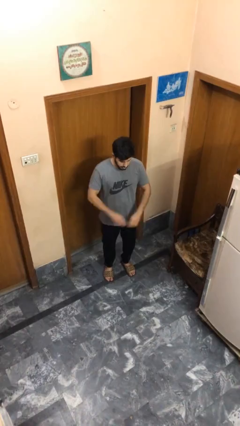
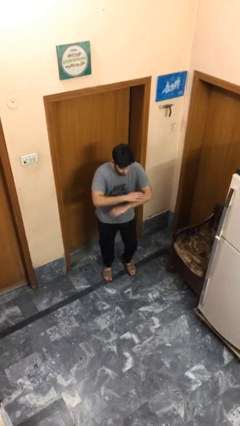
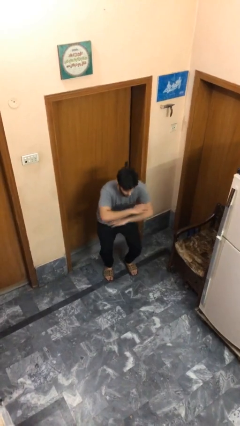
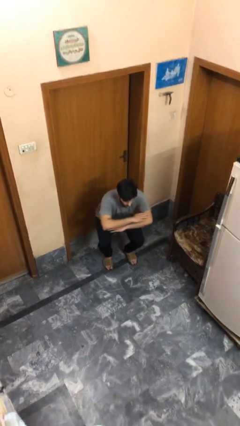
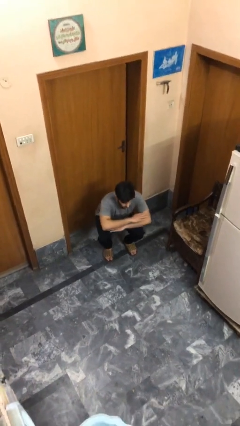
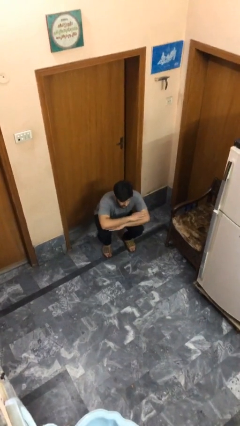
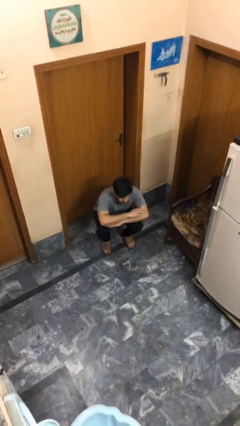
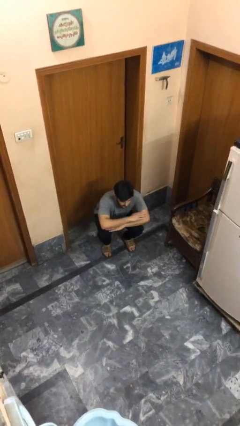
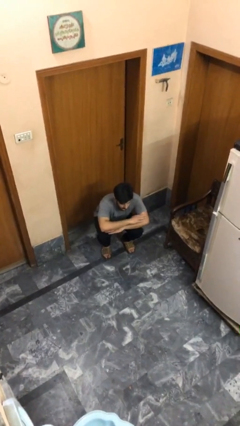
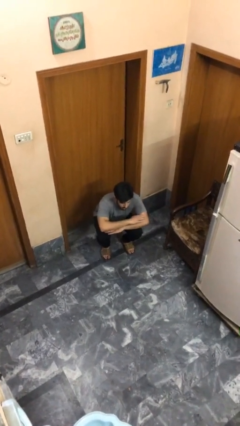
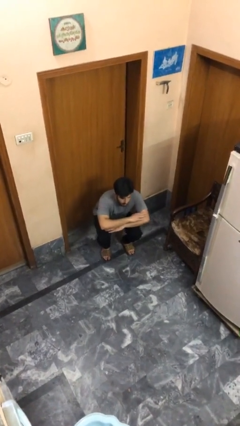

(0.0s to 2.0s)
person squats

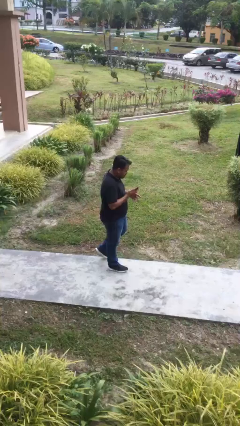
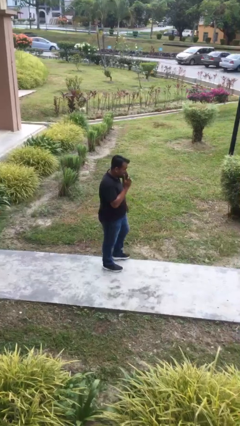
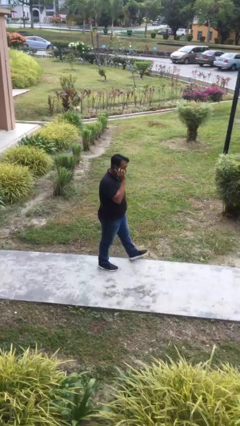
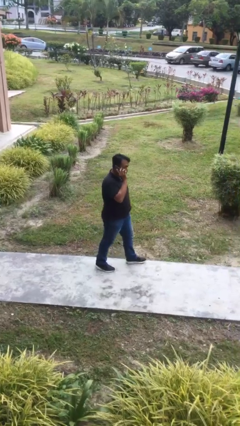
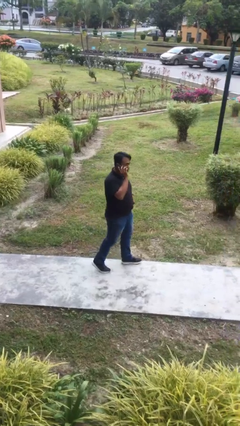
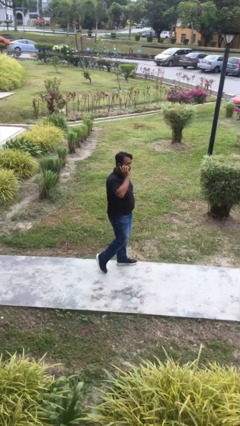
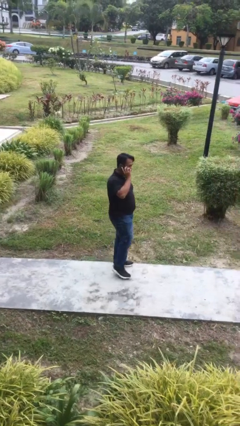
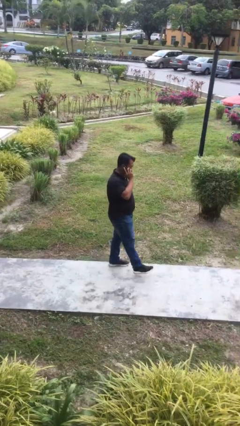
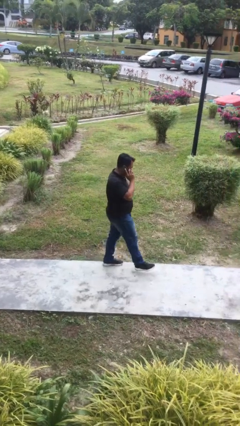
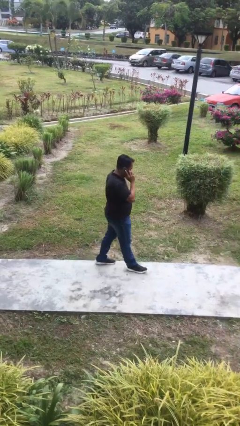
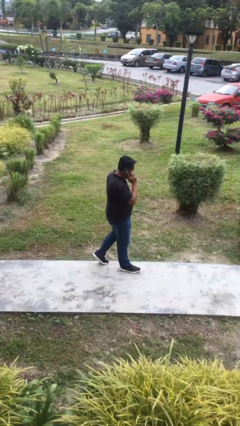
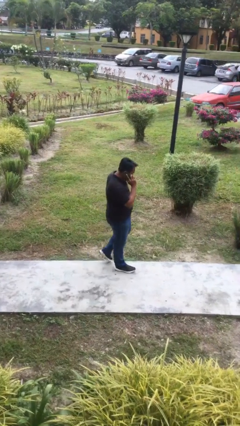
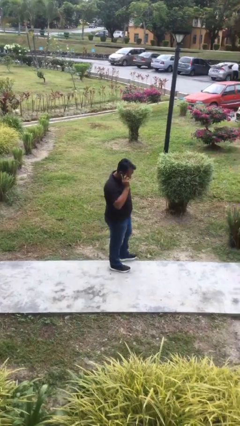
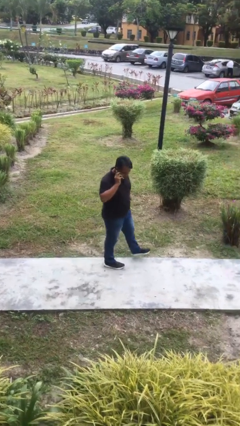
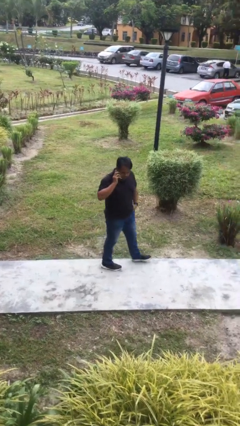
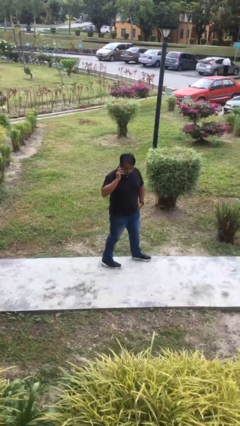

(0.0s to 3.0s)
person talks on phone

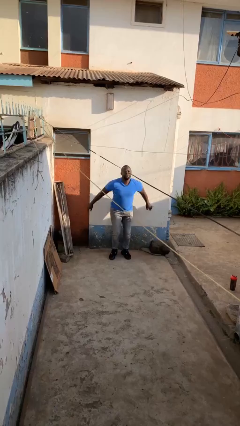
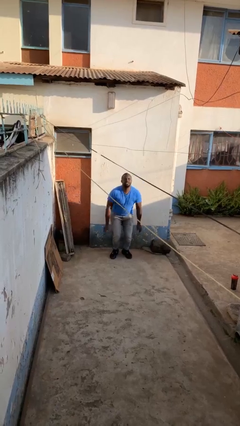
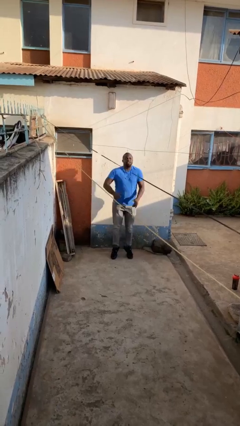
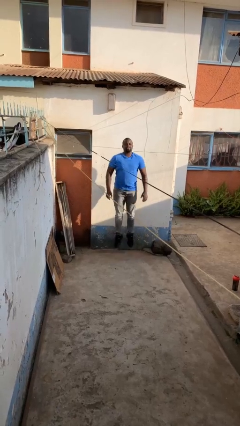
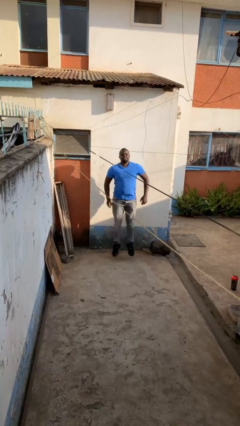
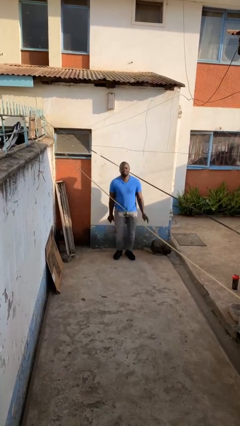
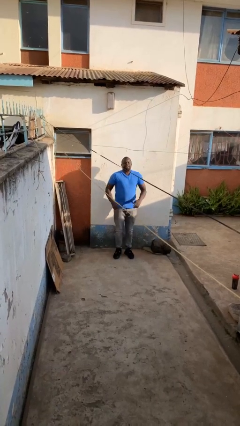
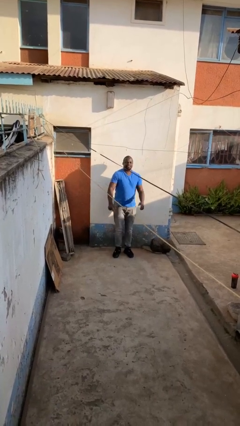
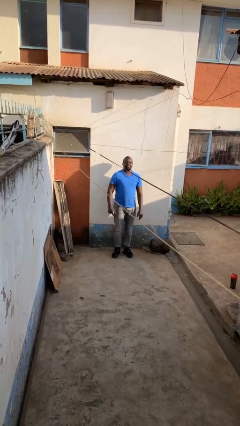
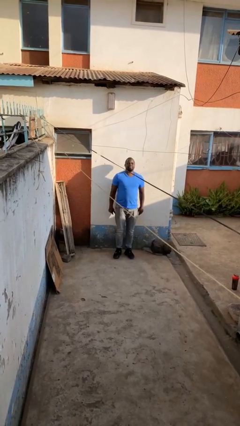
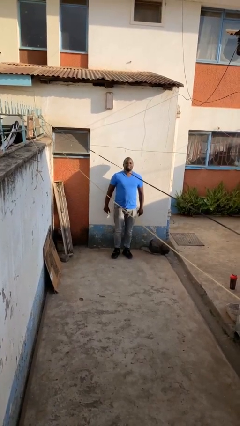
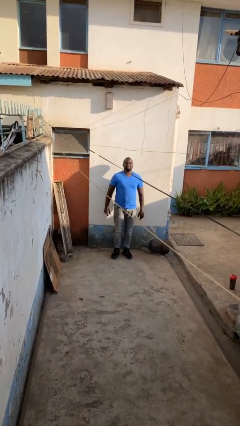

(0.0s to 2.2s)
person jumps

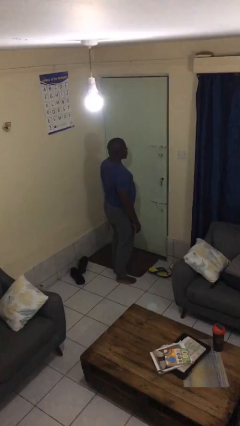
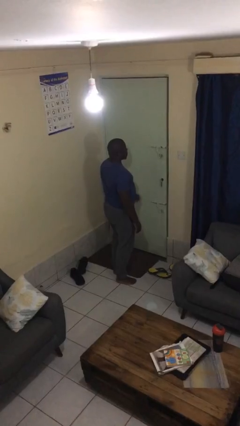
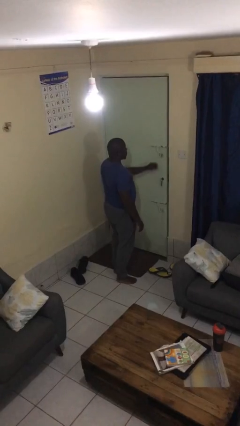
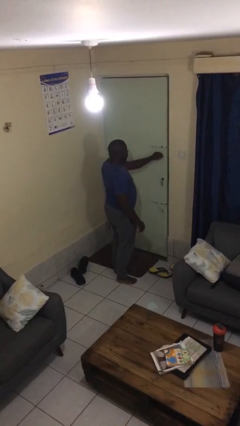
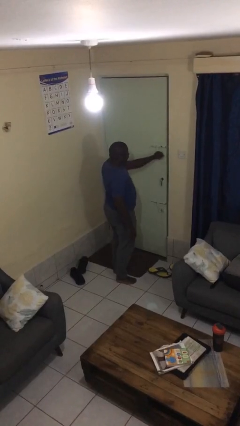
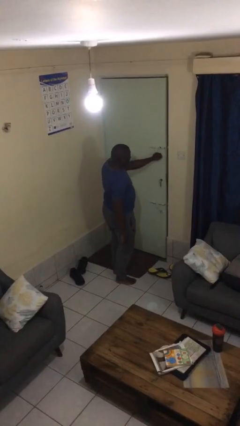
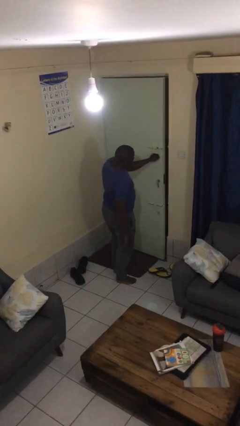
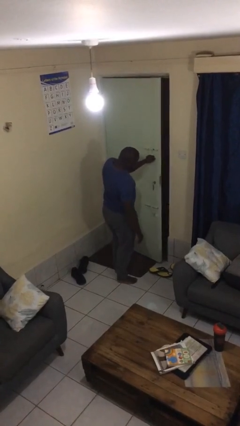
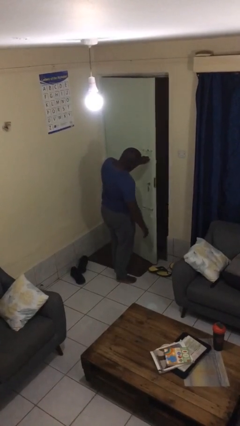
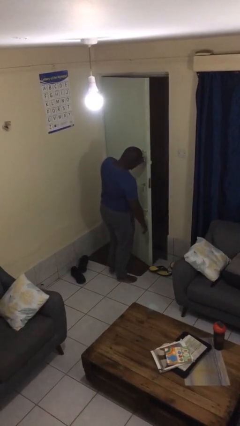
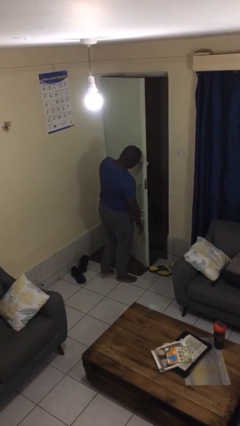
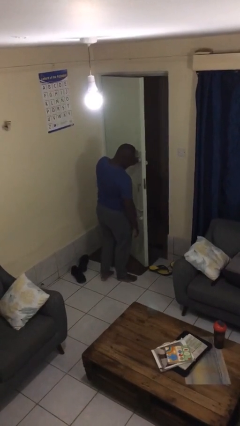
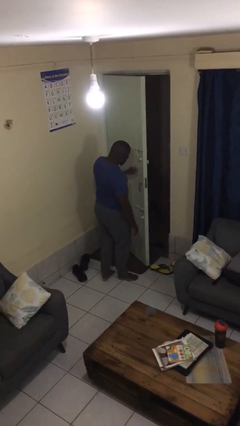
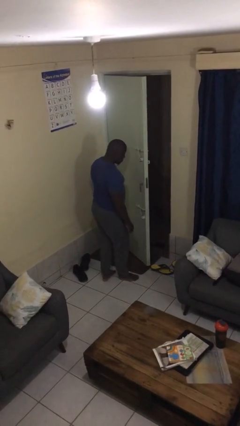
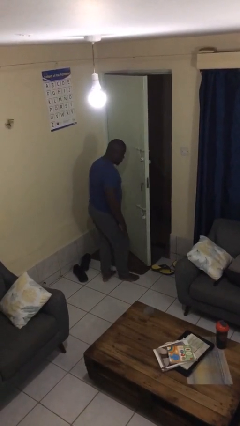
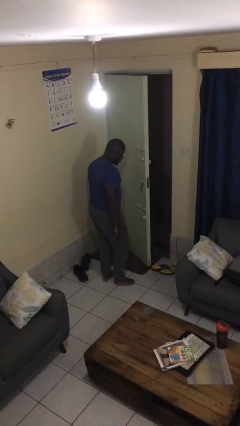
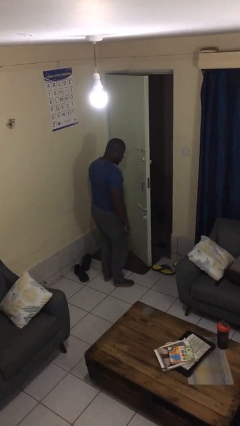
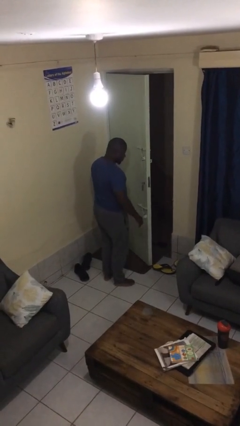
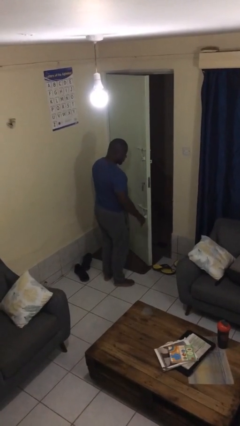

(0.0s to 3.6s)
person opens facility door

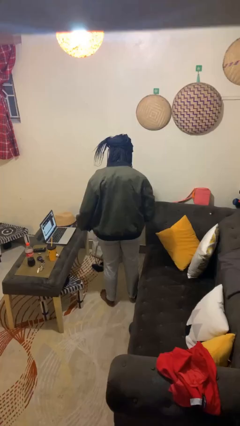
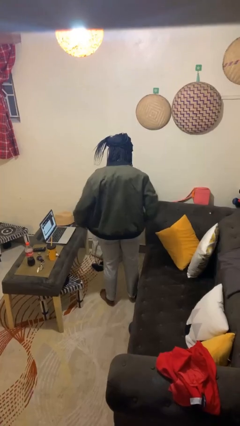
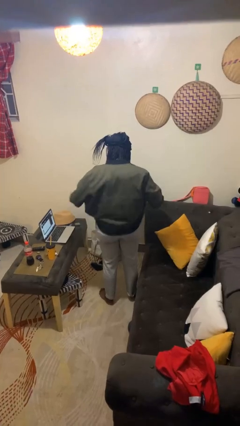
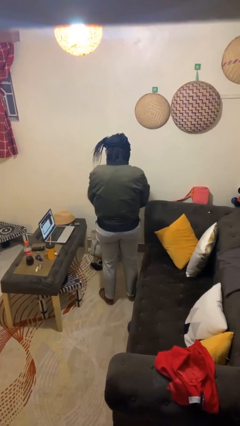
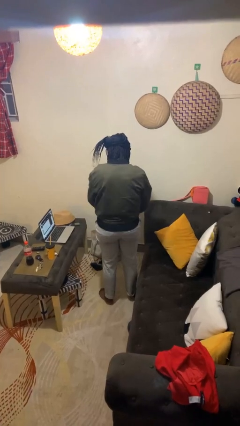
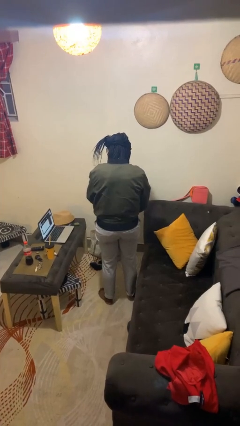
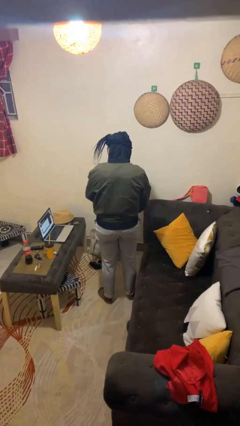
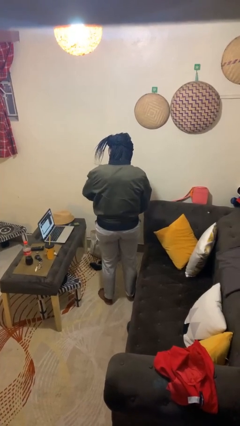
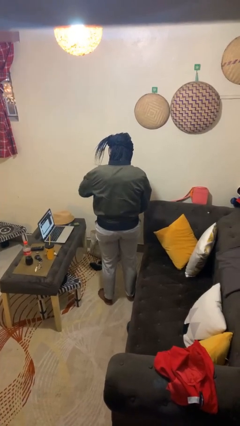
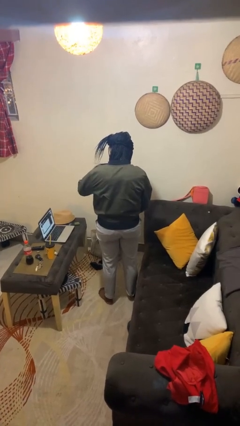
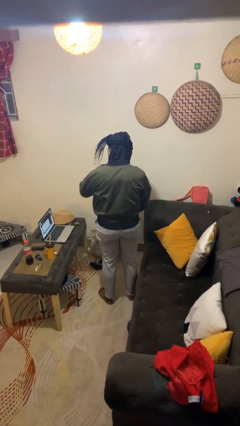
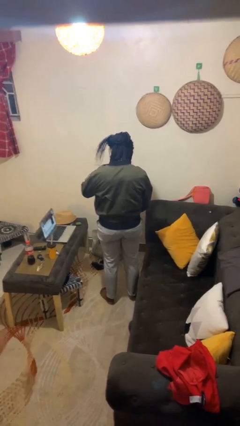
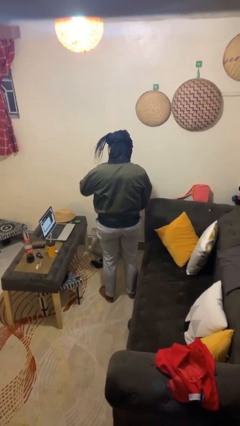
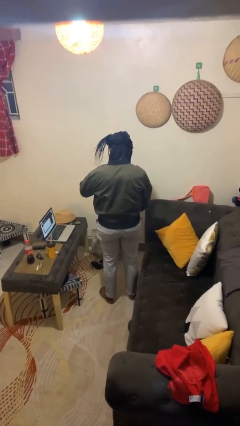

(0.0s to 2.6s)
person zips up jacket

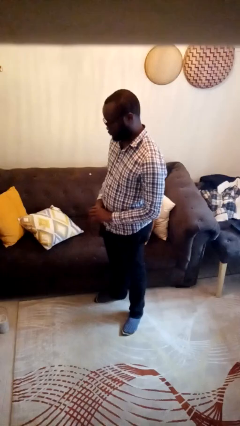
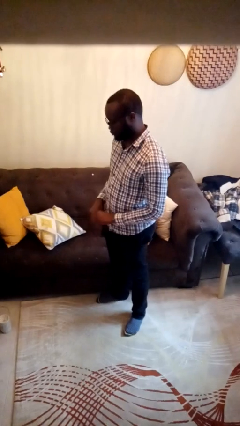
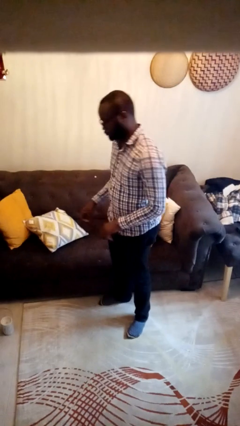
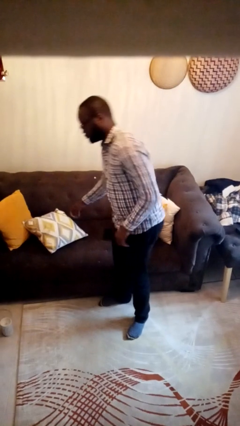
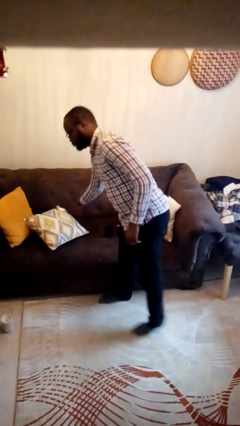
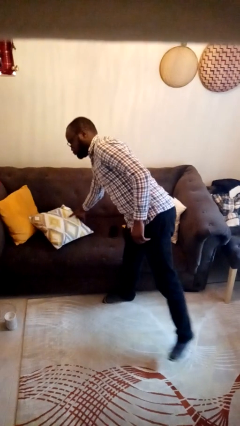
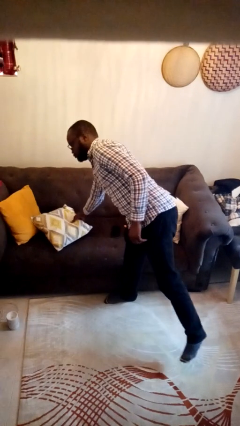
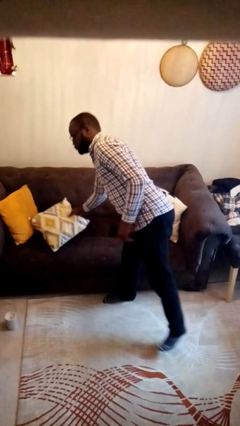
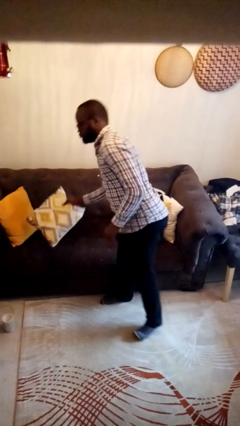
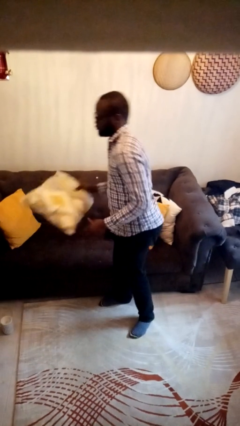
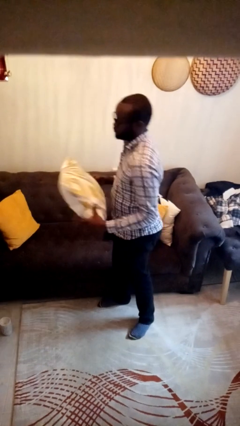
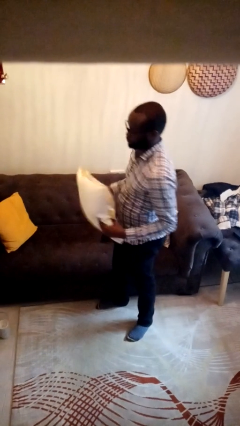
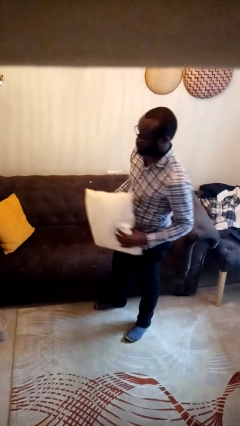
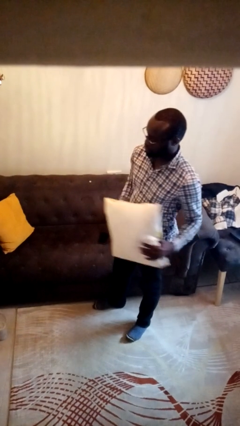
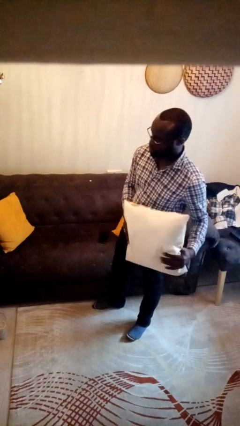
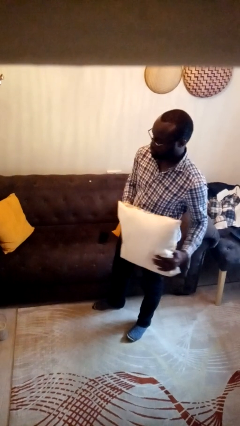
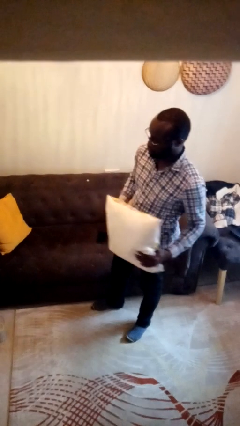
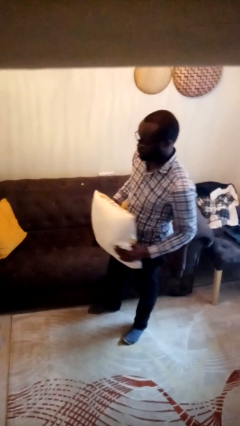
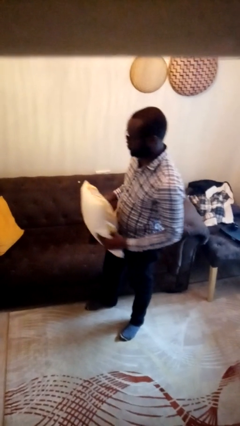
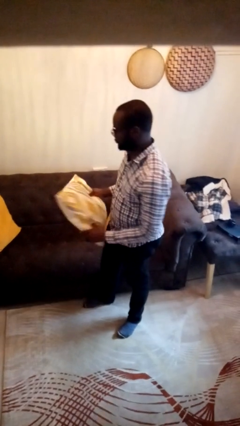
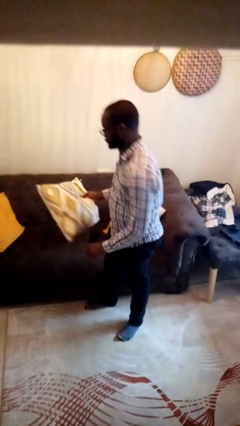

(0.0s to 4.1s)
person picks up object from couch
